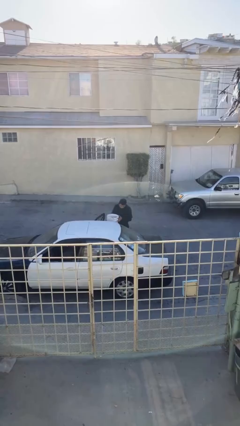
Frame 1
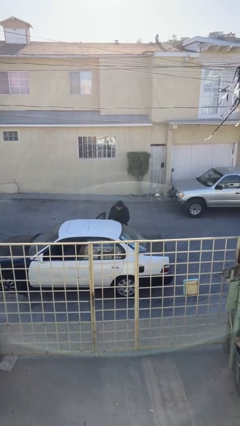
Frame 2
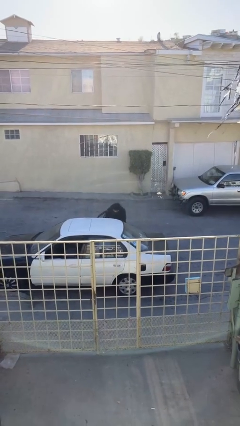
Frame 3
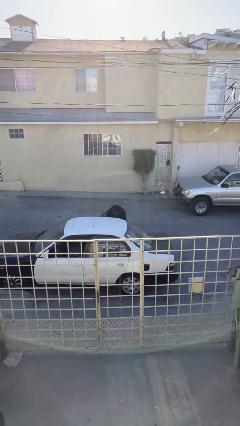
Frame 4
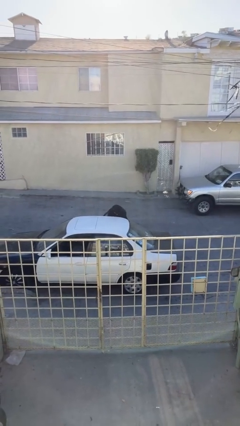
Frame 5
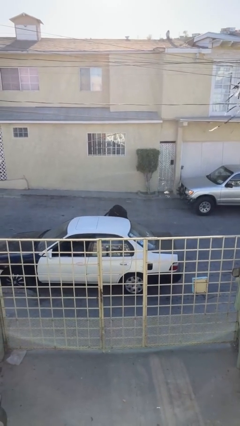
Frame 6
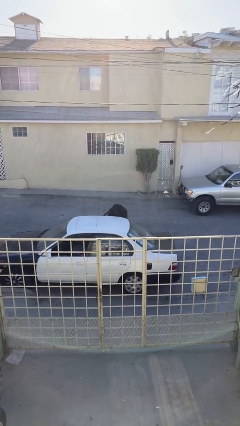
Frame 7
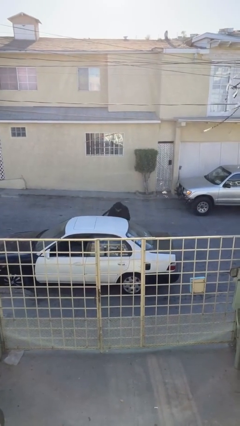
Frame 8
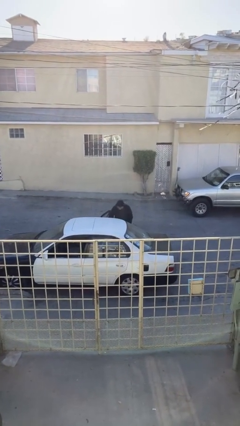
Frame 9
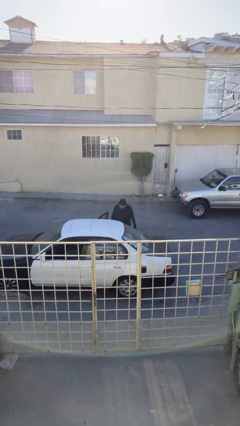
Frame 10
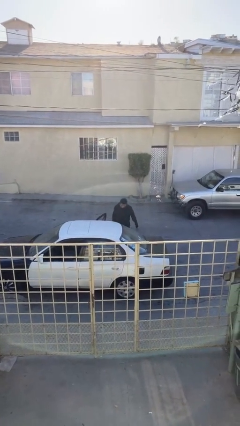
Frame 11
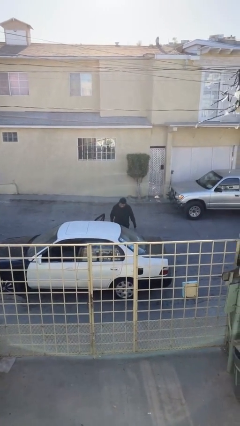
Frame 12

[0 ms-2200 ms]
person loads car

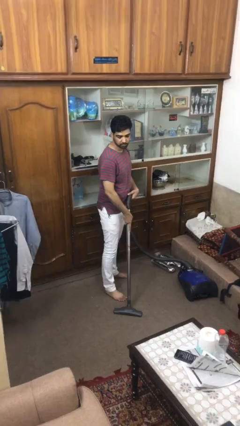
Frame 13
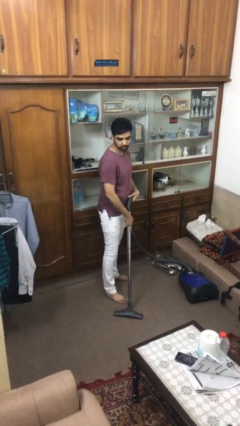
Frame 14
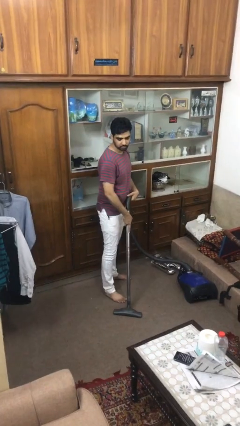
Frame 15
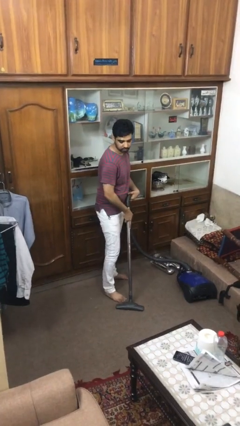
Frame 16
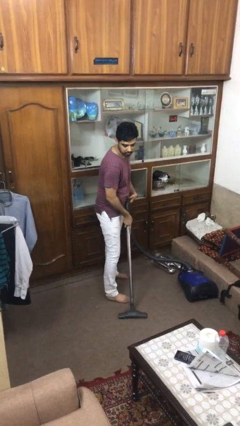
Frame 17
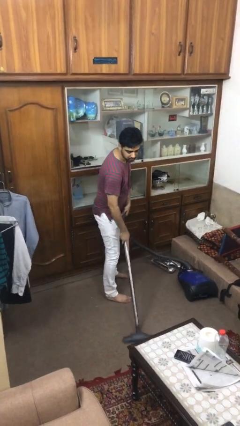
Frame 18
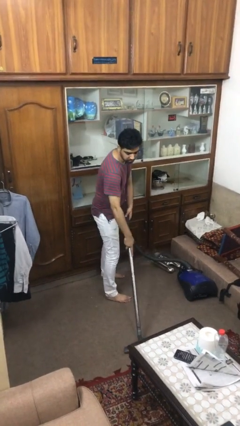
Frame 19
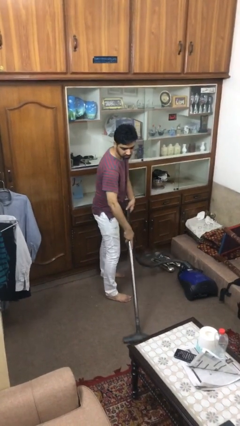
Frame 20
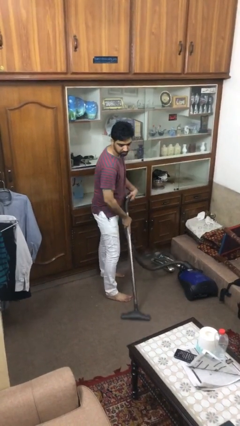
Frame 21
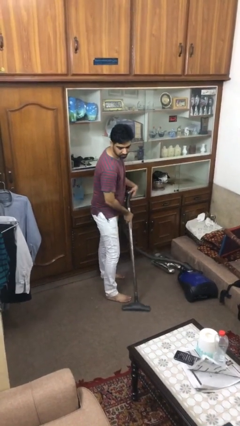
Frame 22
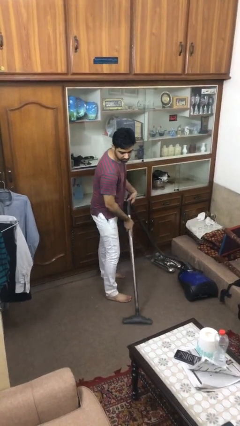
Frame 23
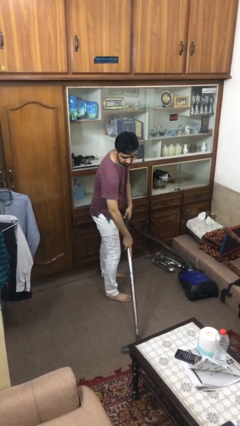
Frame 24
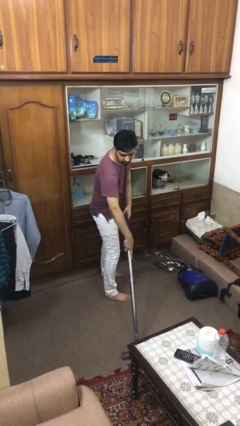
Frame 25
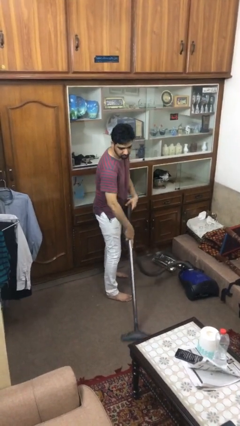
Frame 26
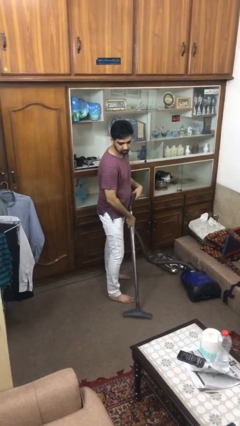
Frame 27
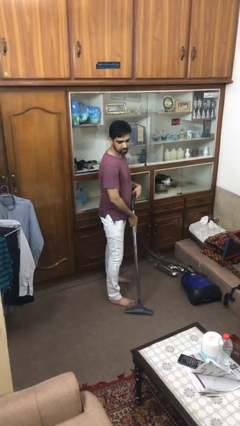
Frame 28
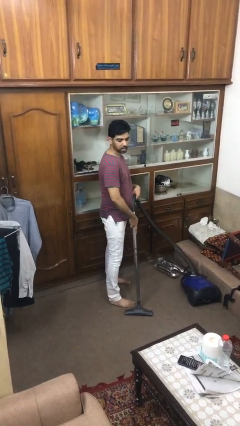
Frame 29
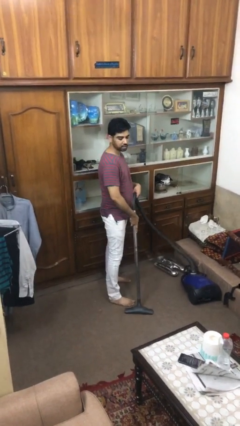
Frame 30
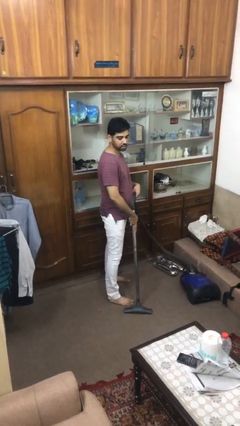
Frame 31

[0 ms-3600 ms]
person vacuums carpet

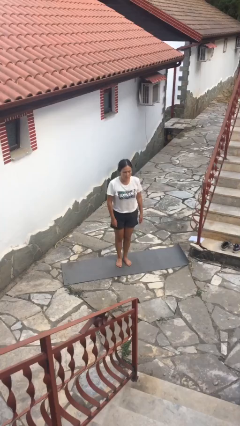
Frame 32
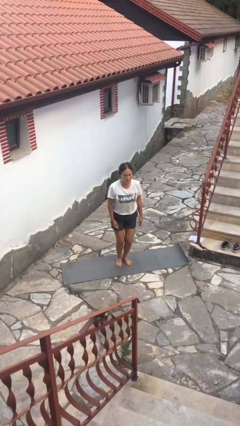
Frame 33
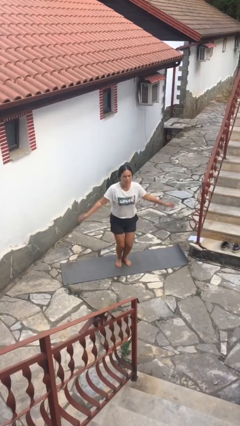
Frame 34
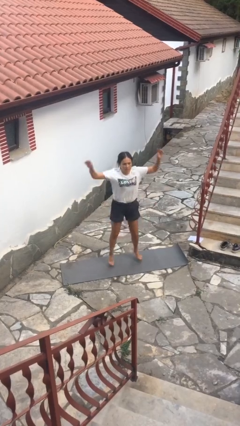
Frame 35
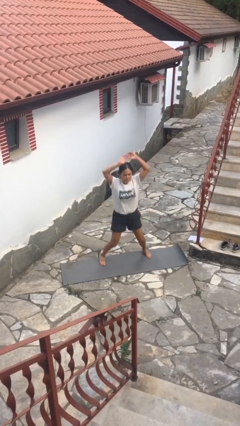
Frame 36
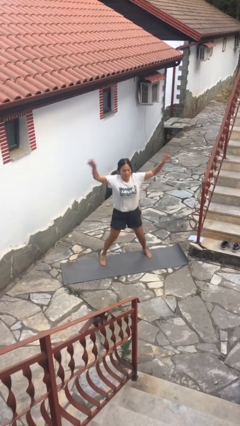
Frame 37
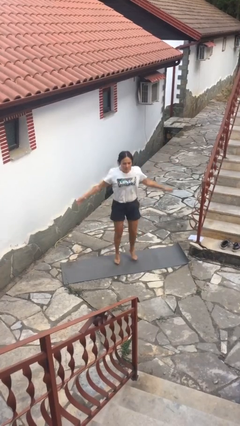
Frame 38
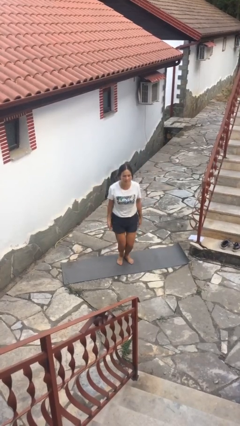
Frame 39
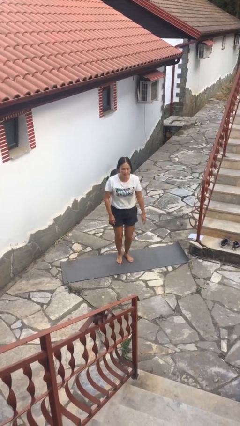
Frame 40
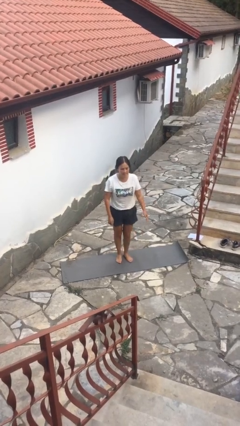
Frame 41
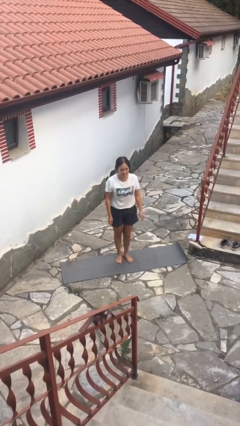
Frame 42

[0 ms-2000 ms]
person exercises with jumping jacks

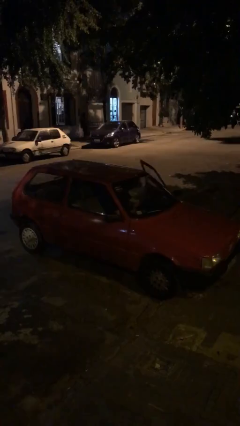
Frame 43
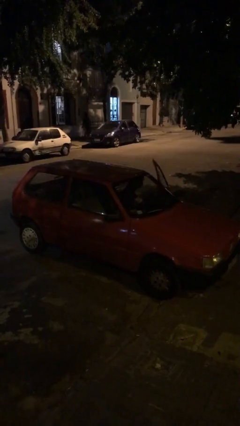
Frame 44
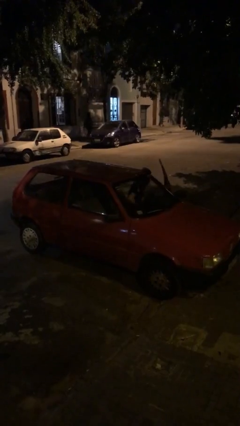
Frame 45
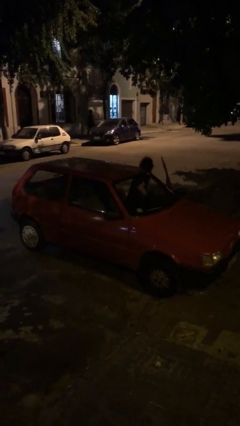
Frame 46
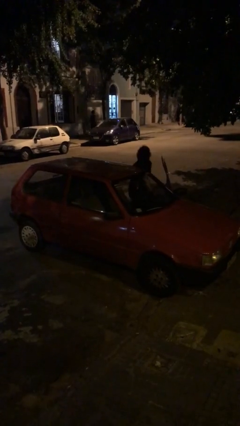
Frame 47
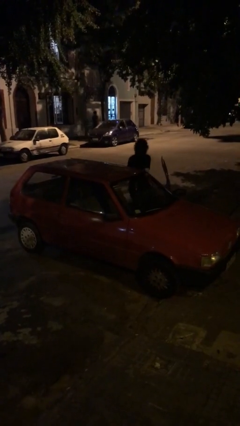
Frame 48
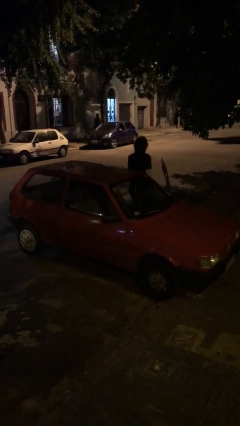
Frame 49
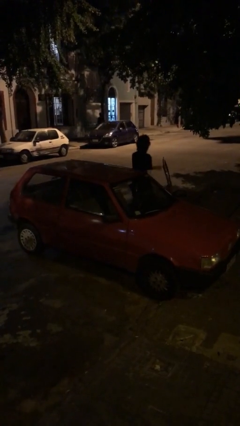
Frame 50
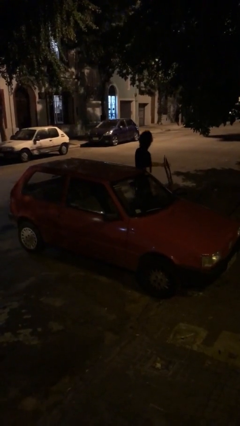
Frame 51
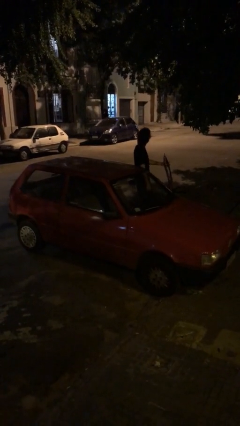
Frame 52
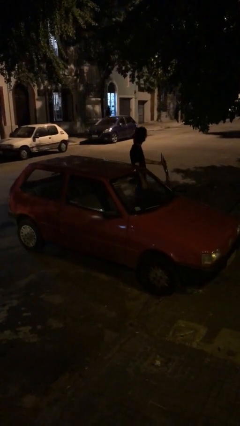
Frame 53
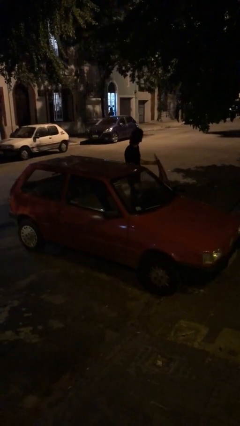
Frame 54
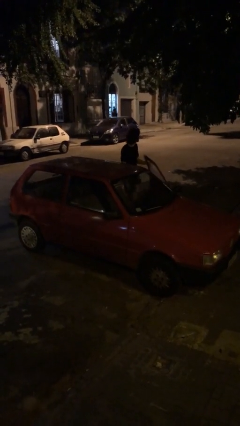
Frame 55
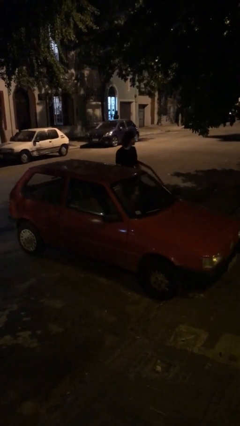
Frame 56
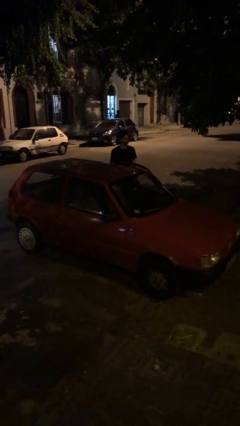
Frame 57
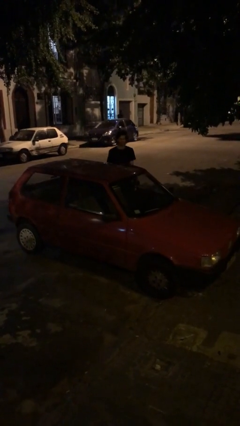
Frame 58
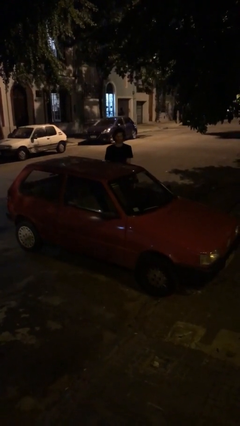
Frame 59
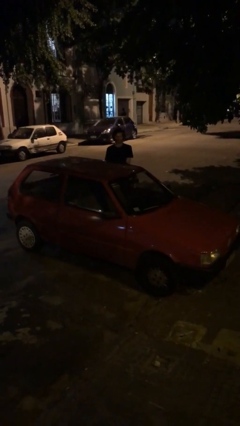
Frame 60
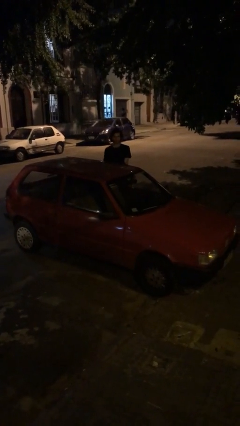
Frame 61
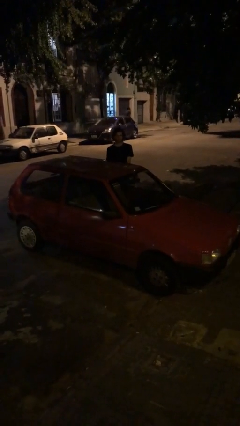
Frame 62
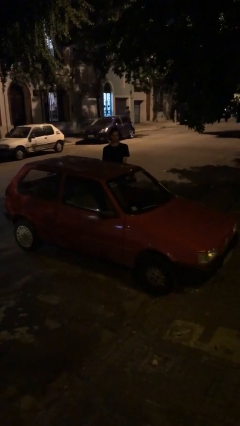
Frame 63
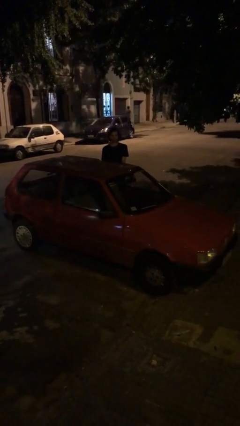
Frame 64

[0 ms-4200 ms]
car drops off person

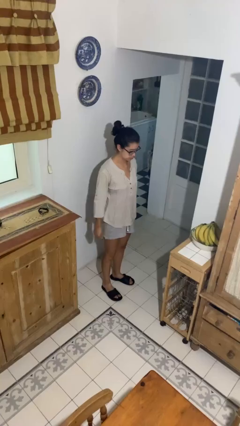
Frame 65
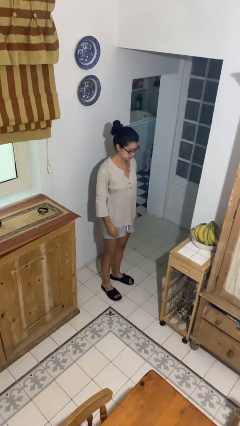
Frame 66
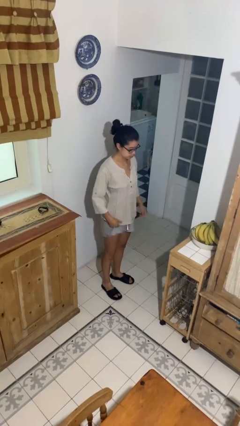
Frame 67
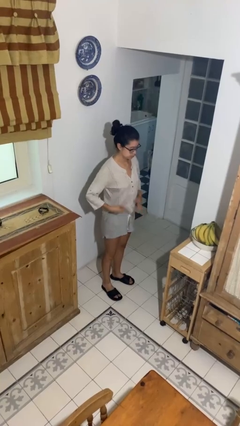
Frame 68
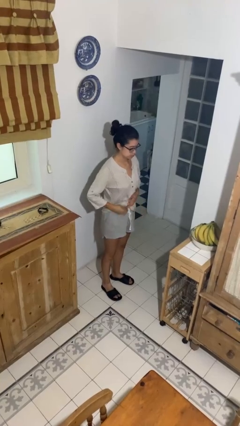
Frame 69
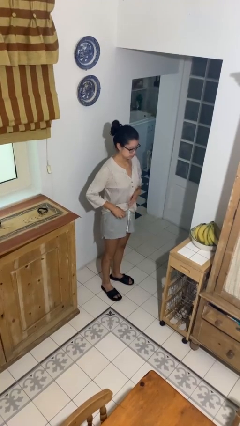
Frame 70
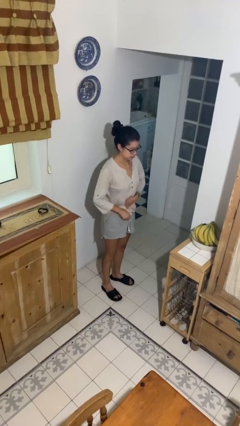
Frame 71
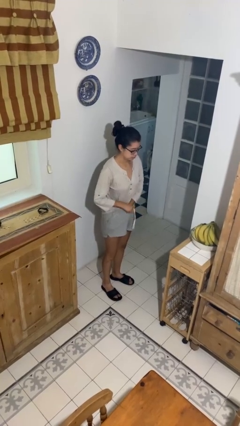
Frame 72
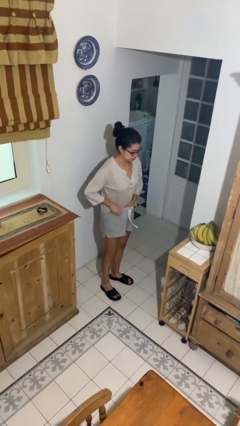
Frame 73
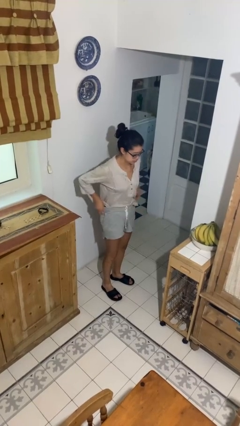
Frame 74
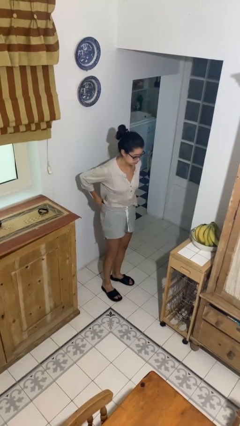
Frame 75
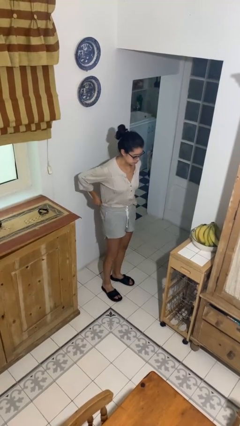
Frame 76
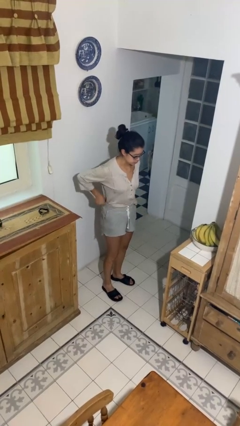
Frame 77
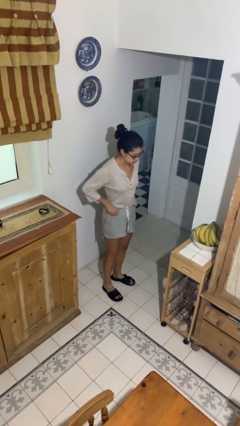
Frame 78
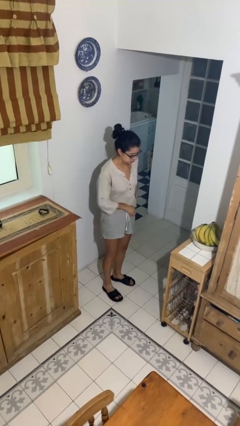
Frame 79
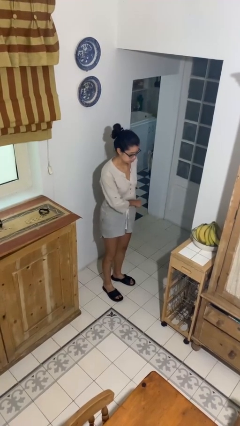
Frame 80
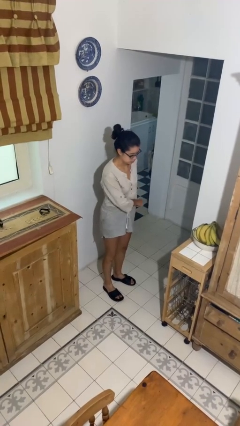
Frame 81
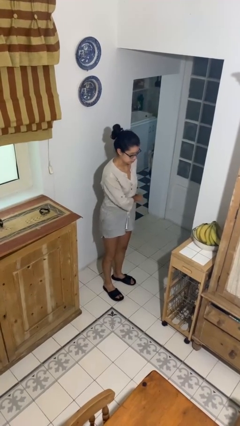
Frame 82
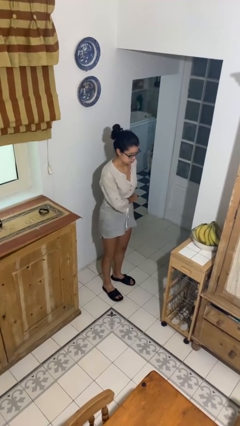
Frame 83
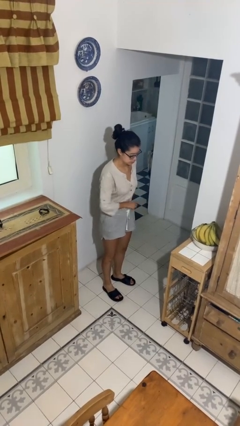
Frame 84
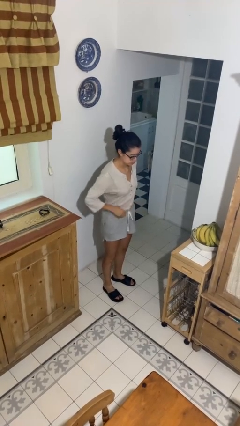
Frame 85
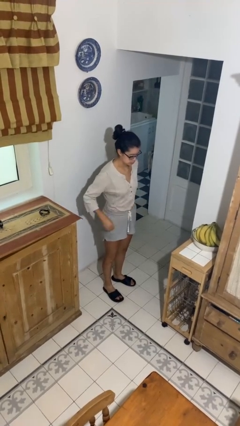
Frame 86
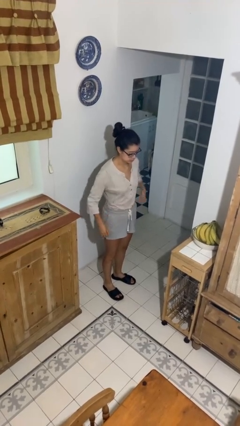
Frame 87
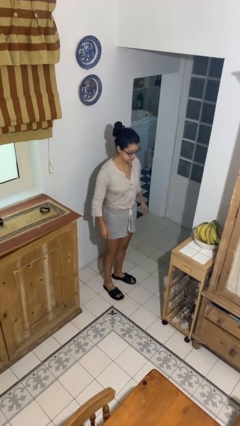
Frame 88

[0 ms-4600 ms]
person tucks in shirt

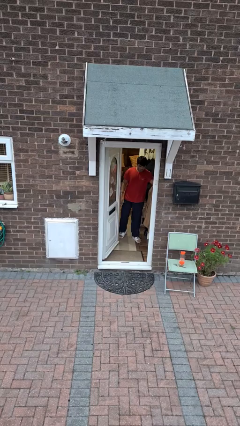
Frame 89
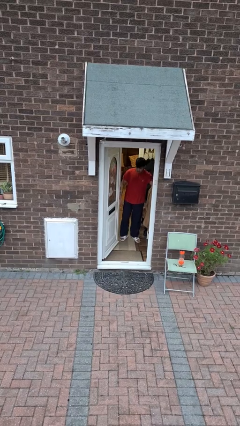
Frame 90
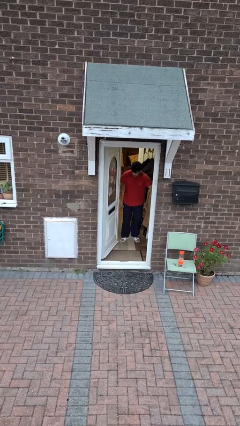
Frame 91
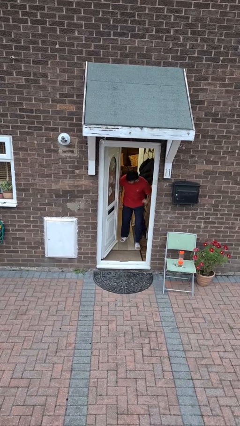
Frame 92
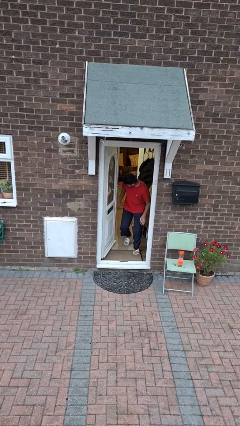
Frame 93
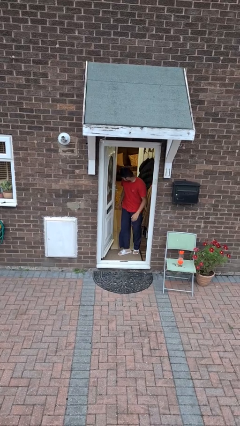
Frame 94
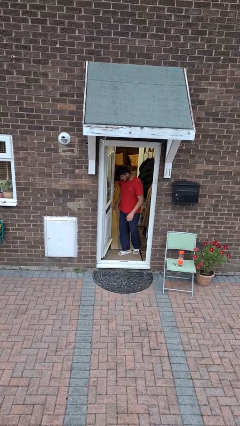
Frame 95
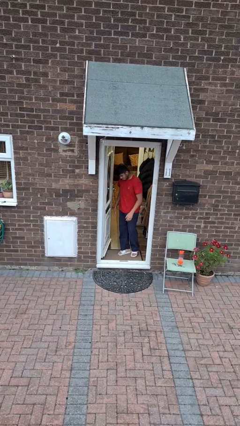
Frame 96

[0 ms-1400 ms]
person bumps into wall
